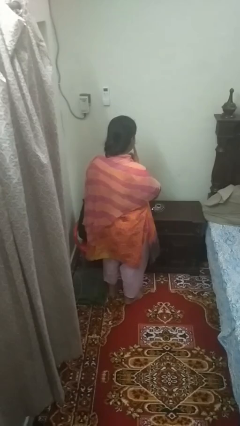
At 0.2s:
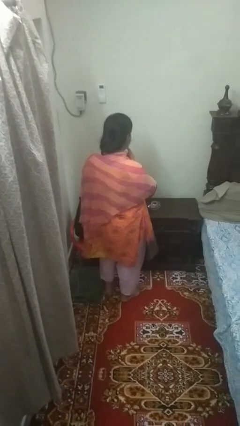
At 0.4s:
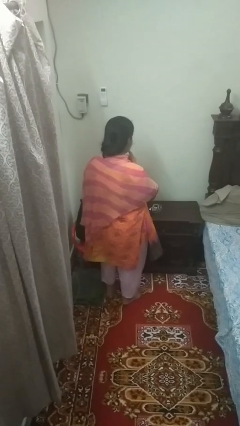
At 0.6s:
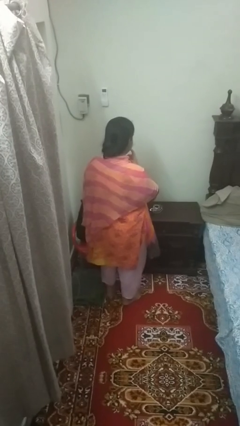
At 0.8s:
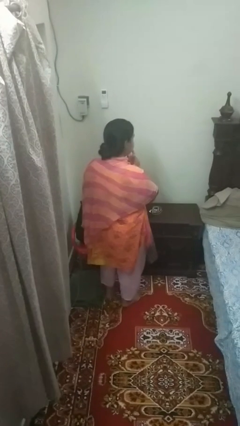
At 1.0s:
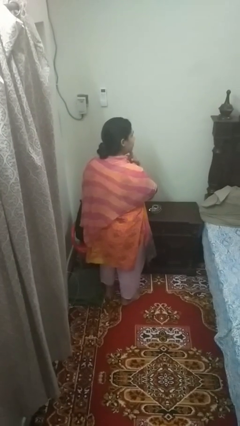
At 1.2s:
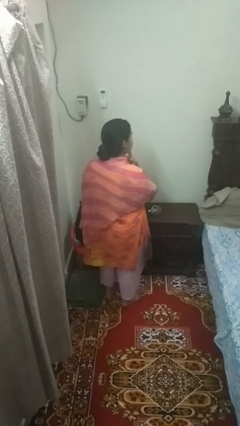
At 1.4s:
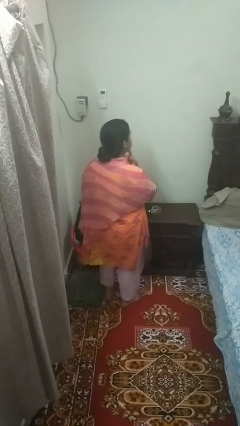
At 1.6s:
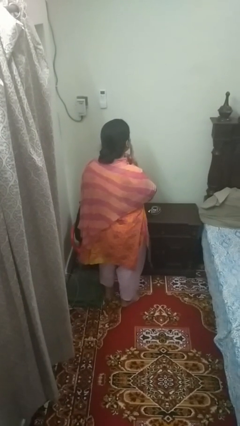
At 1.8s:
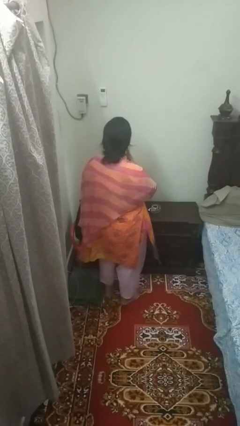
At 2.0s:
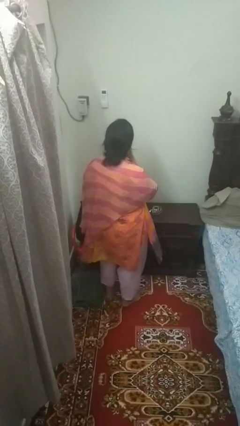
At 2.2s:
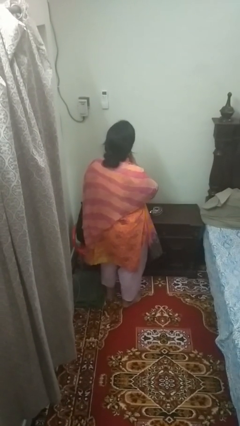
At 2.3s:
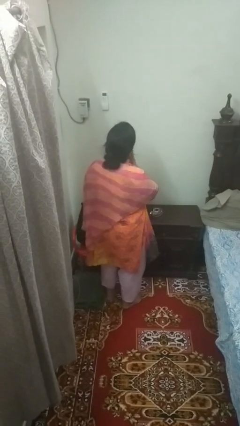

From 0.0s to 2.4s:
person strokes chin

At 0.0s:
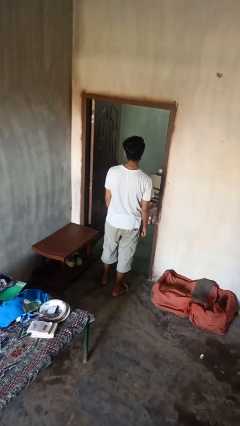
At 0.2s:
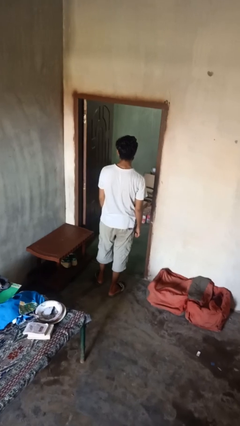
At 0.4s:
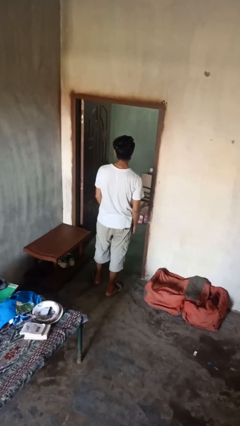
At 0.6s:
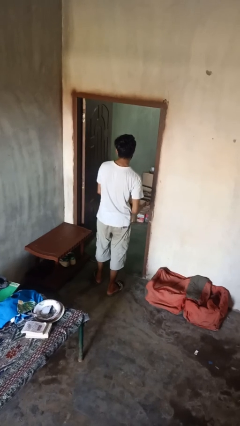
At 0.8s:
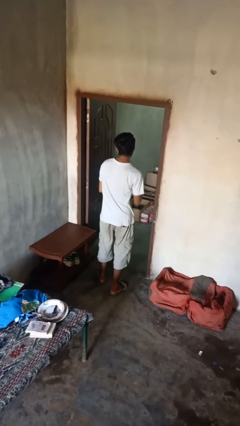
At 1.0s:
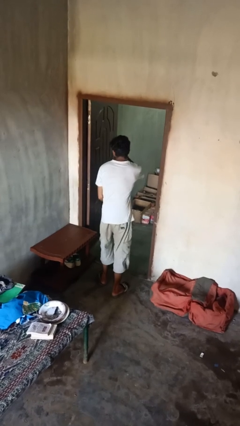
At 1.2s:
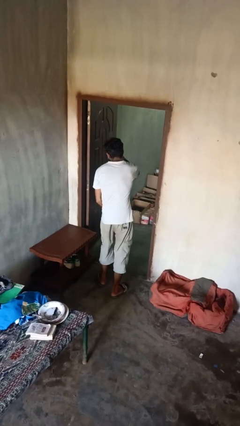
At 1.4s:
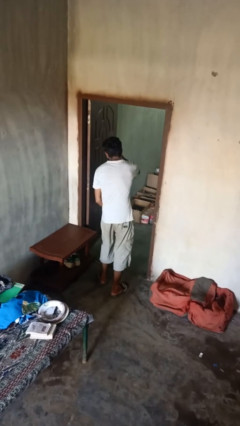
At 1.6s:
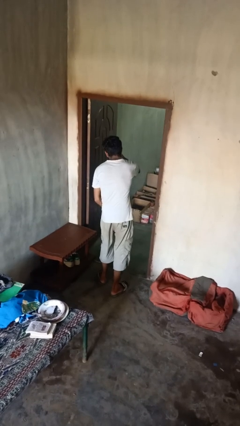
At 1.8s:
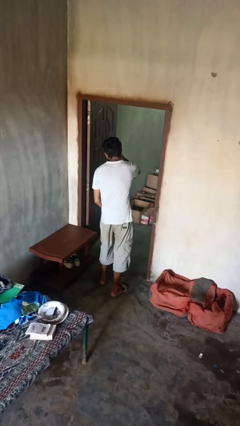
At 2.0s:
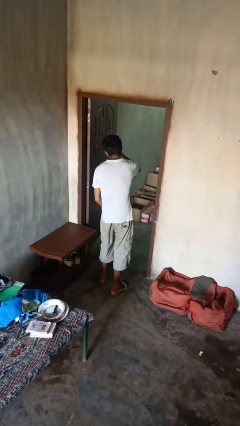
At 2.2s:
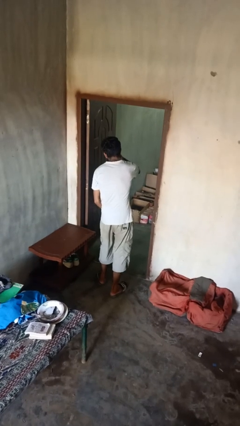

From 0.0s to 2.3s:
person punches

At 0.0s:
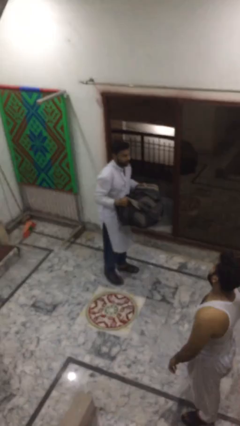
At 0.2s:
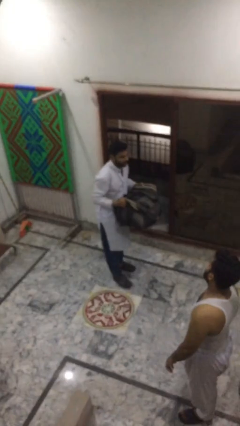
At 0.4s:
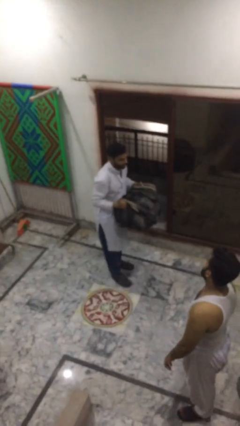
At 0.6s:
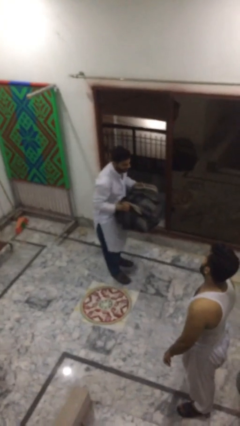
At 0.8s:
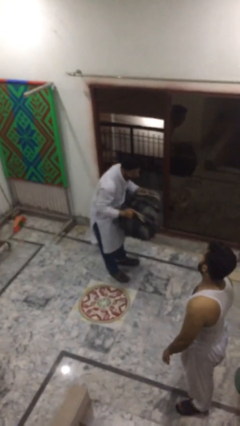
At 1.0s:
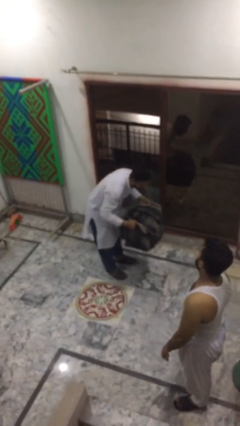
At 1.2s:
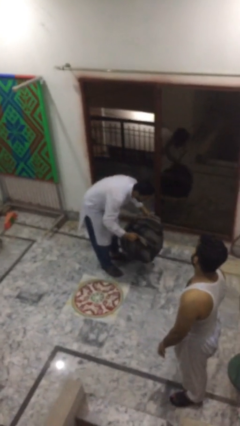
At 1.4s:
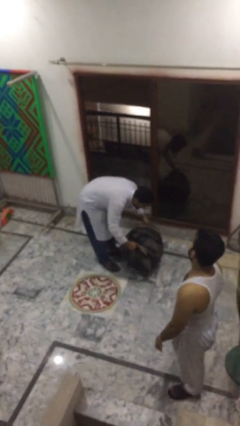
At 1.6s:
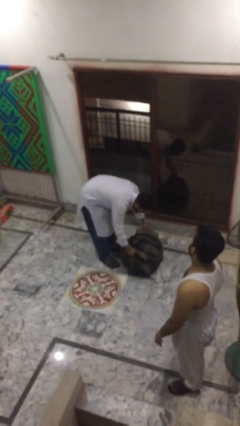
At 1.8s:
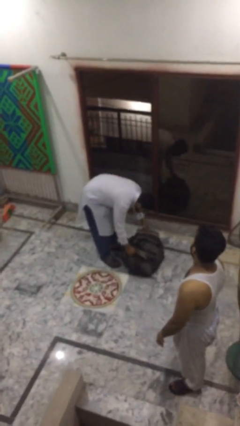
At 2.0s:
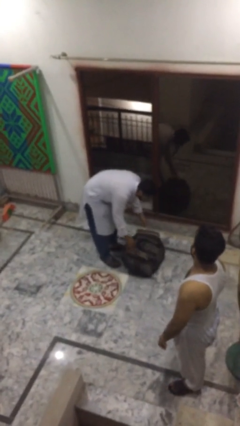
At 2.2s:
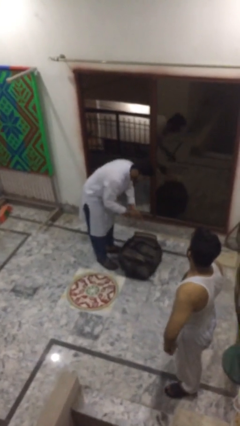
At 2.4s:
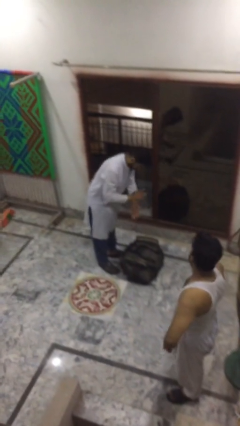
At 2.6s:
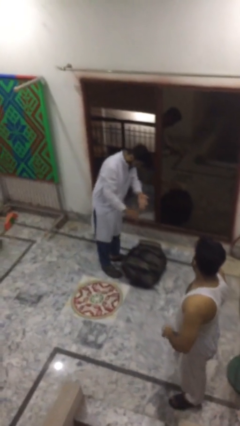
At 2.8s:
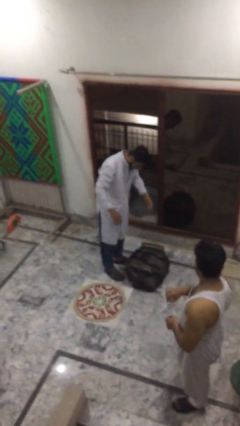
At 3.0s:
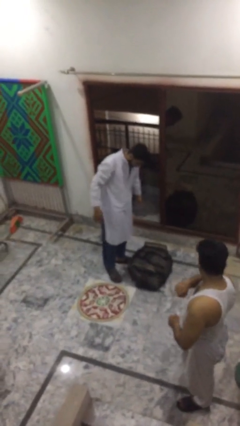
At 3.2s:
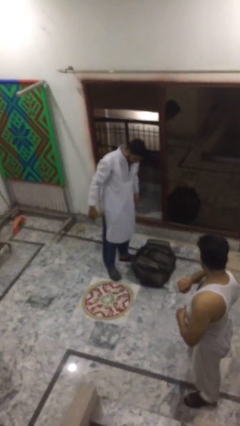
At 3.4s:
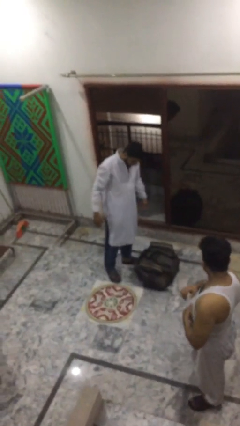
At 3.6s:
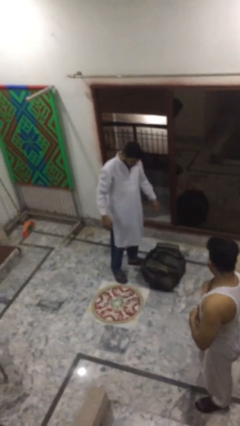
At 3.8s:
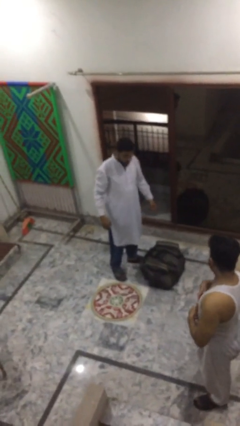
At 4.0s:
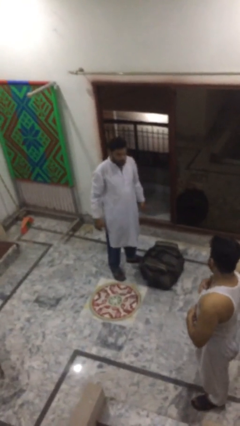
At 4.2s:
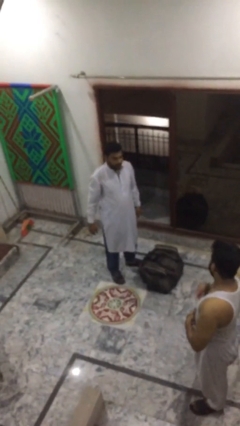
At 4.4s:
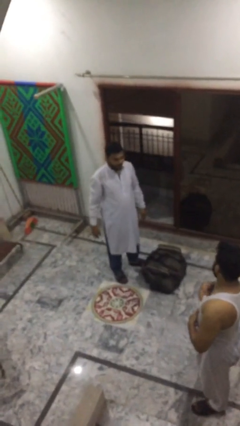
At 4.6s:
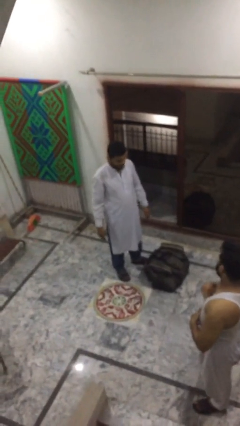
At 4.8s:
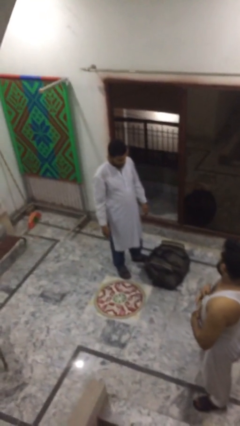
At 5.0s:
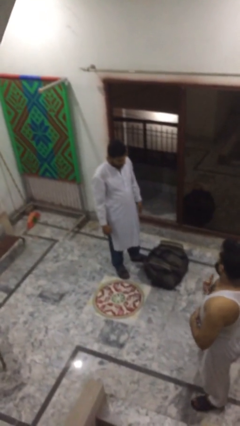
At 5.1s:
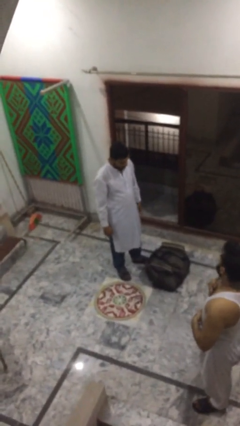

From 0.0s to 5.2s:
person puts down object on floor

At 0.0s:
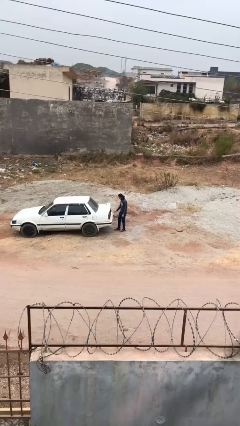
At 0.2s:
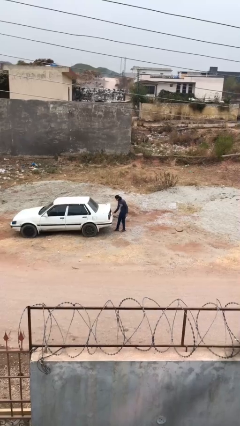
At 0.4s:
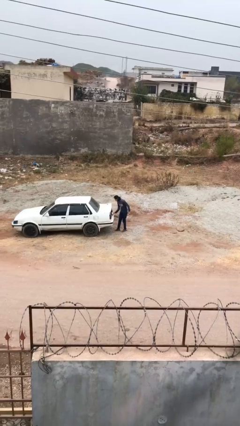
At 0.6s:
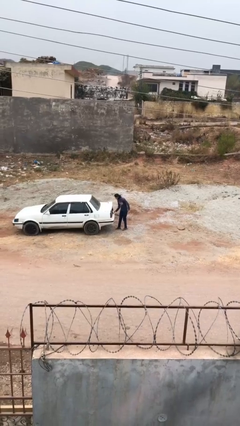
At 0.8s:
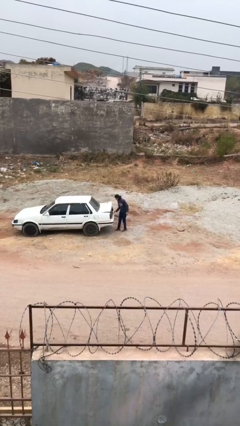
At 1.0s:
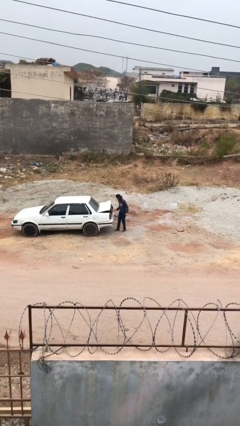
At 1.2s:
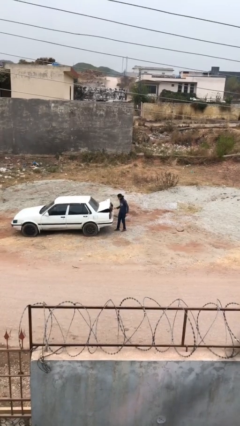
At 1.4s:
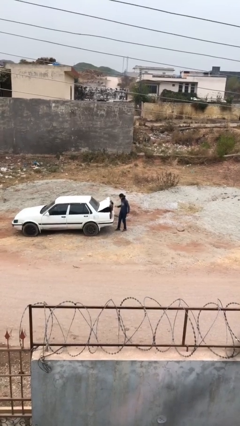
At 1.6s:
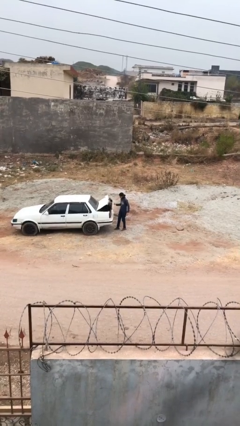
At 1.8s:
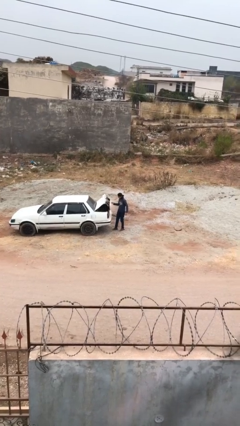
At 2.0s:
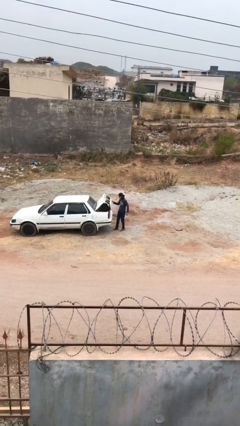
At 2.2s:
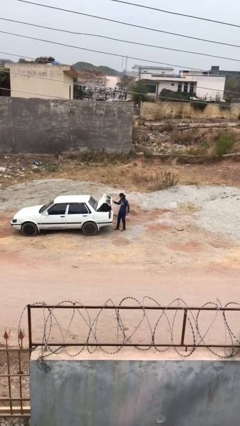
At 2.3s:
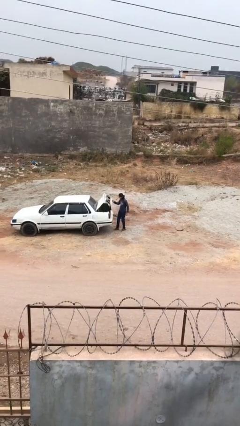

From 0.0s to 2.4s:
person opens car trunk

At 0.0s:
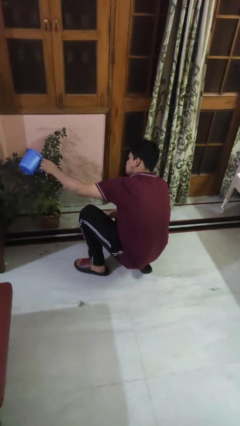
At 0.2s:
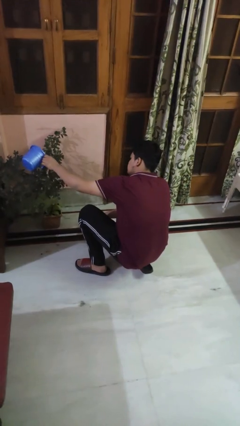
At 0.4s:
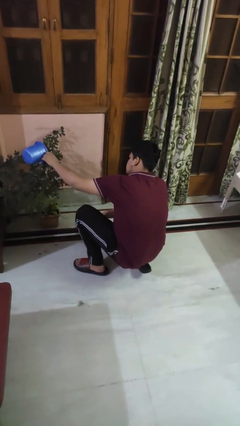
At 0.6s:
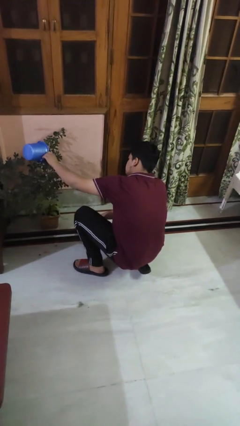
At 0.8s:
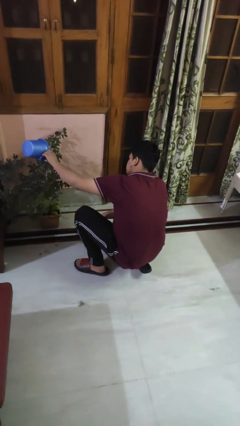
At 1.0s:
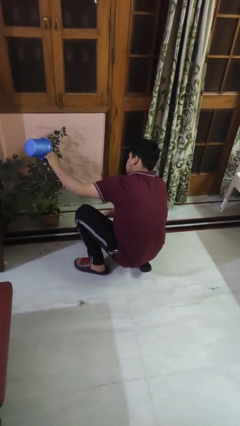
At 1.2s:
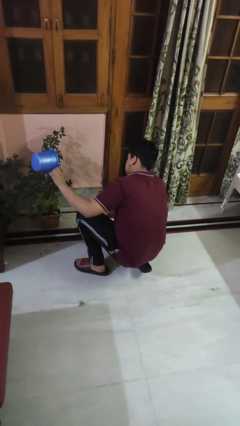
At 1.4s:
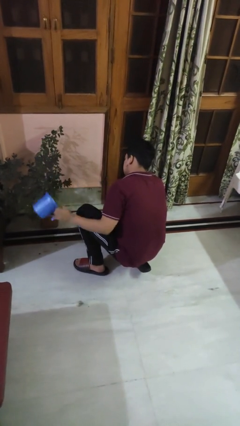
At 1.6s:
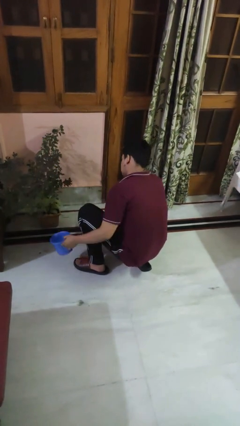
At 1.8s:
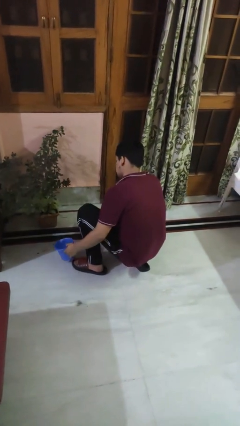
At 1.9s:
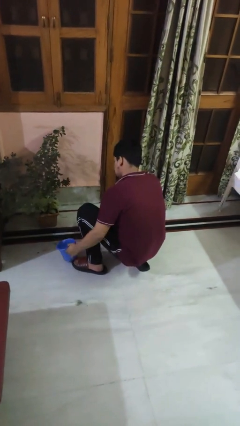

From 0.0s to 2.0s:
person waters houseplant

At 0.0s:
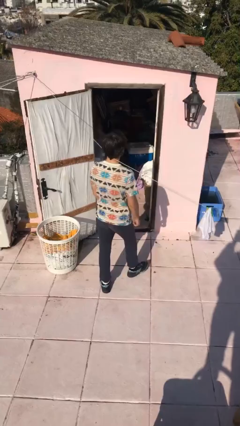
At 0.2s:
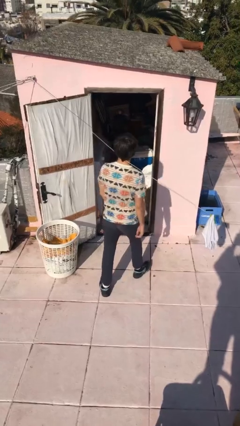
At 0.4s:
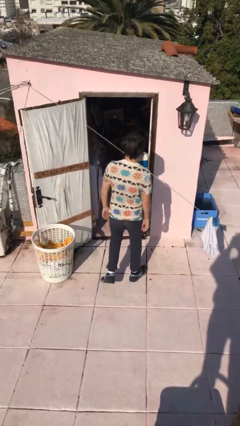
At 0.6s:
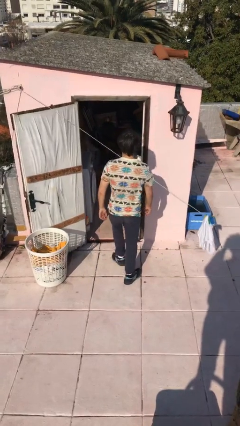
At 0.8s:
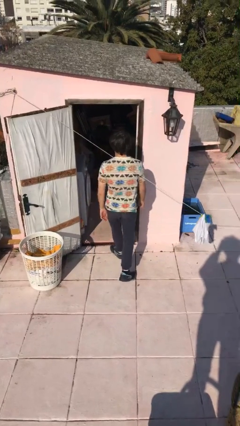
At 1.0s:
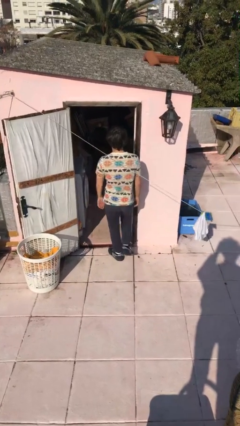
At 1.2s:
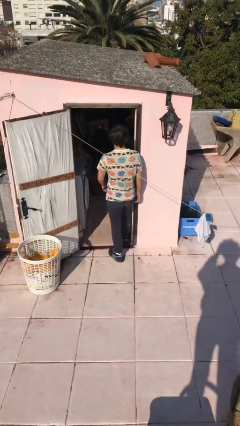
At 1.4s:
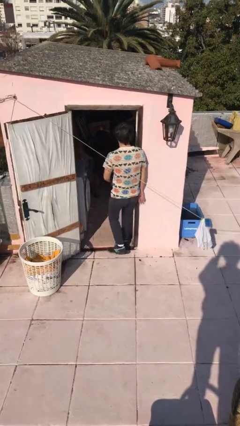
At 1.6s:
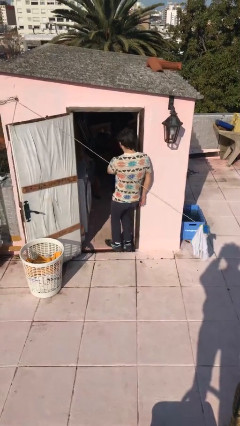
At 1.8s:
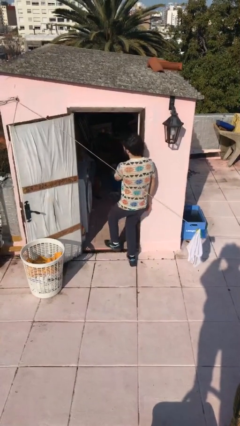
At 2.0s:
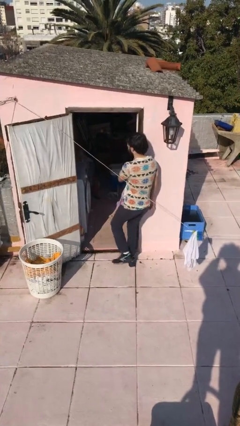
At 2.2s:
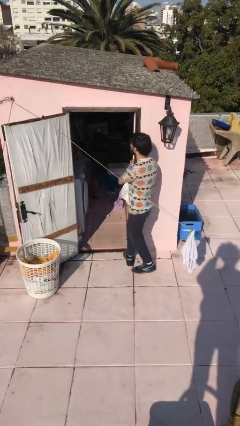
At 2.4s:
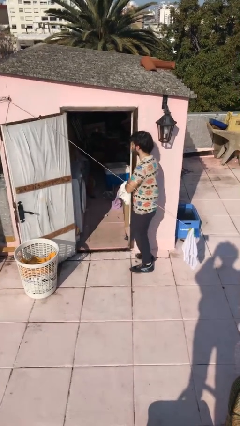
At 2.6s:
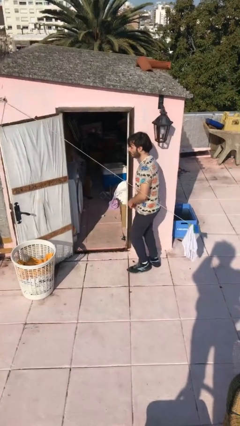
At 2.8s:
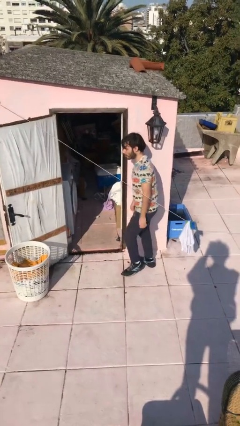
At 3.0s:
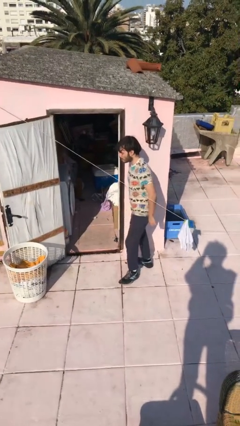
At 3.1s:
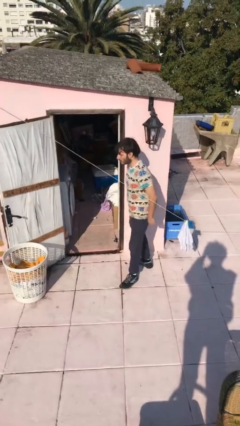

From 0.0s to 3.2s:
person bumps into wall
